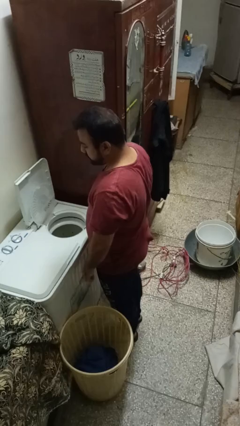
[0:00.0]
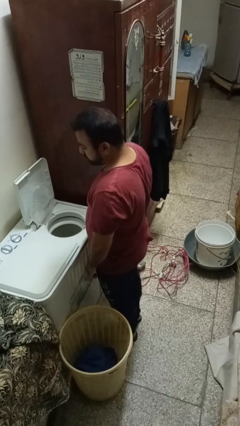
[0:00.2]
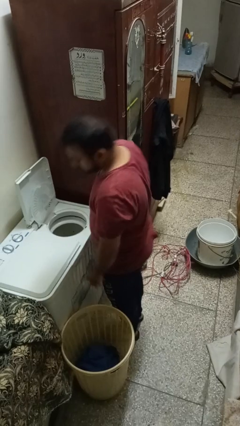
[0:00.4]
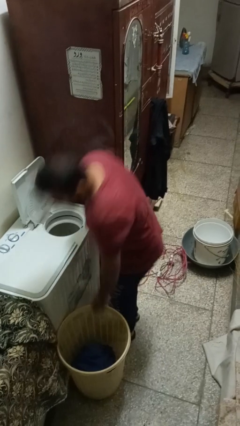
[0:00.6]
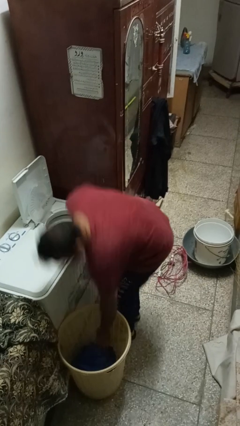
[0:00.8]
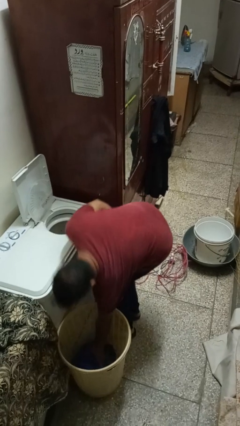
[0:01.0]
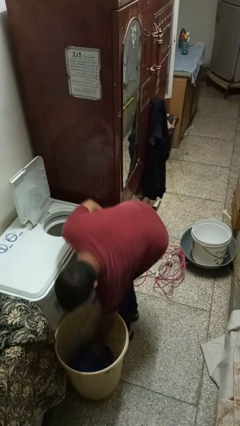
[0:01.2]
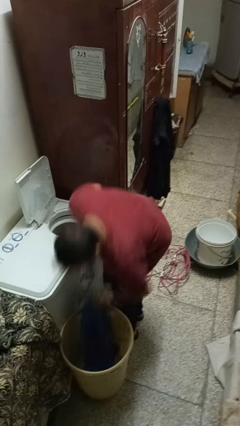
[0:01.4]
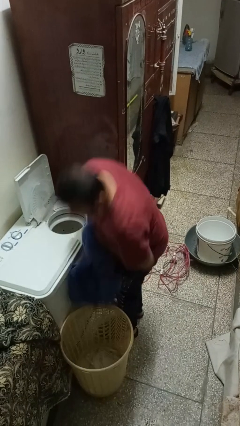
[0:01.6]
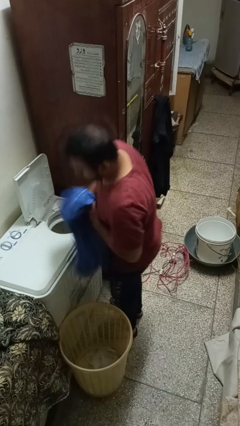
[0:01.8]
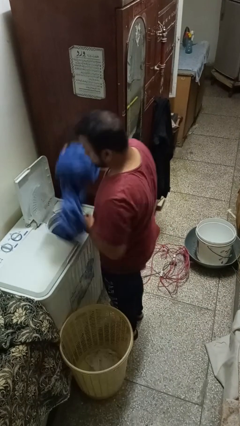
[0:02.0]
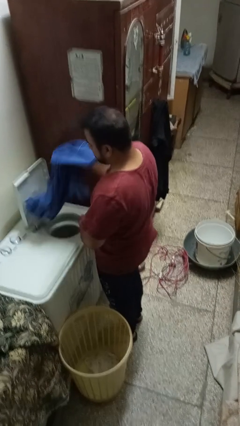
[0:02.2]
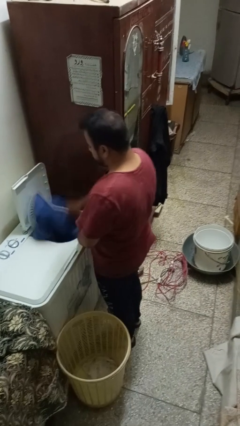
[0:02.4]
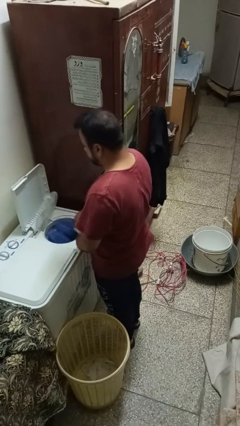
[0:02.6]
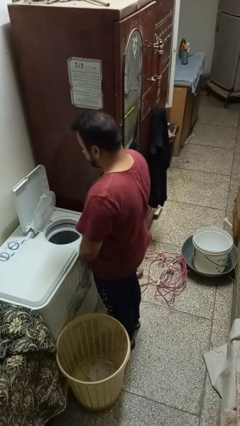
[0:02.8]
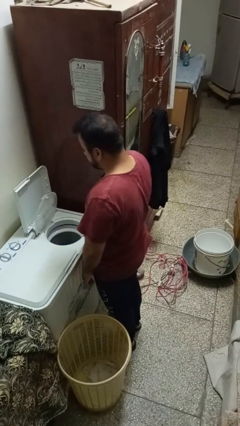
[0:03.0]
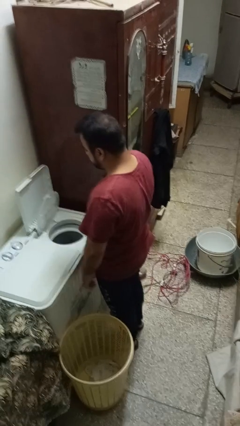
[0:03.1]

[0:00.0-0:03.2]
person loads dryer

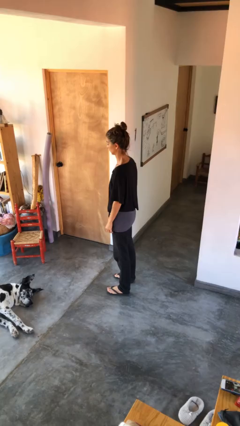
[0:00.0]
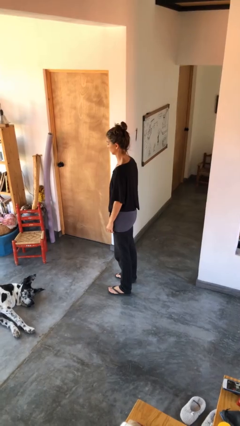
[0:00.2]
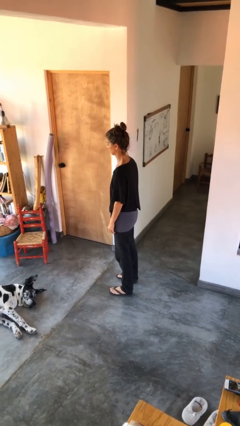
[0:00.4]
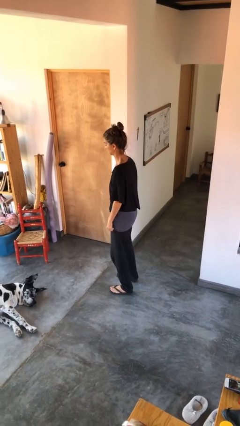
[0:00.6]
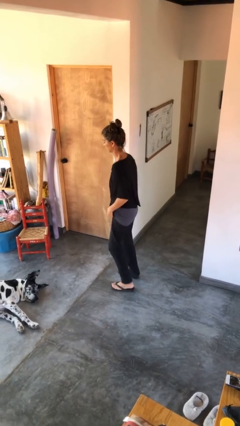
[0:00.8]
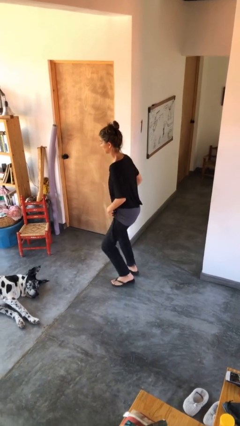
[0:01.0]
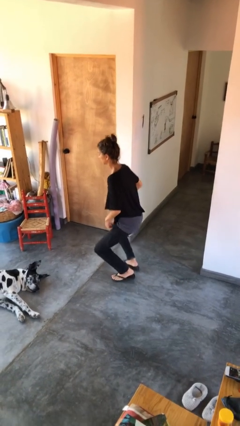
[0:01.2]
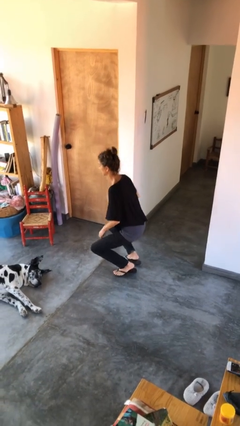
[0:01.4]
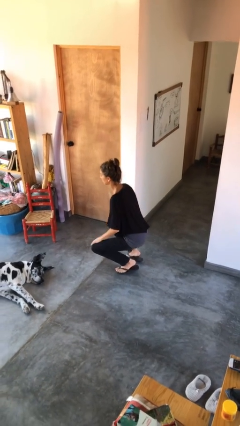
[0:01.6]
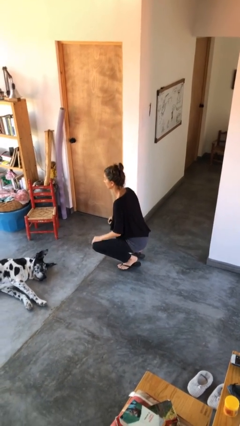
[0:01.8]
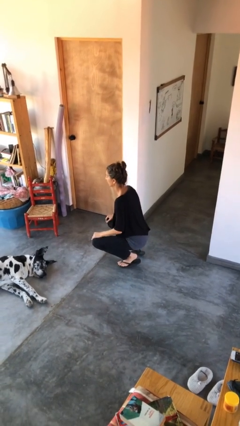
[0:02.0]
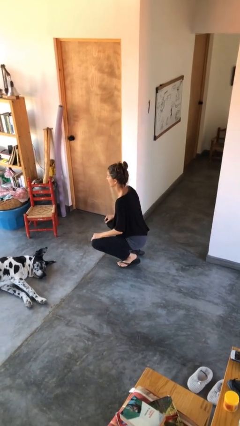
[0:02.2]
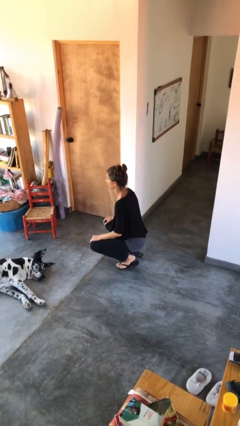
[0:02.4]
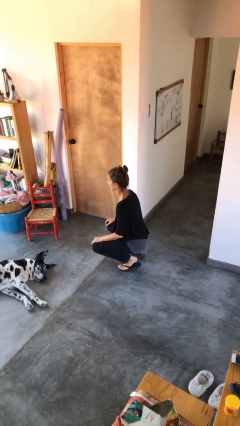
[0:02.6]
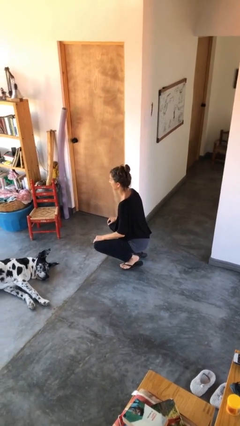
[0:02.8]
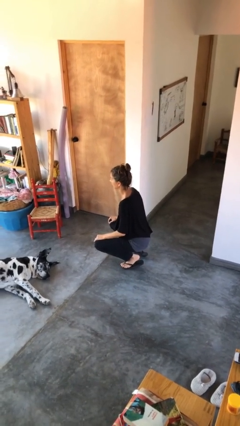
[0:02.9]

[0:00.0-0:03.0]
person squats

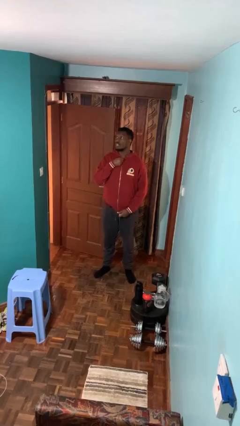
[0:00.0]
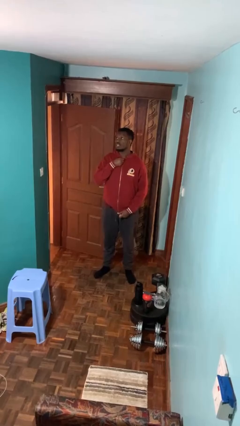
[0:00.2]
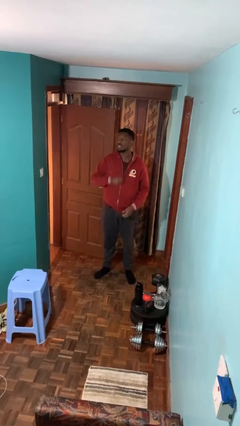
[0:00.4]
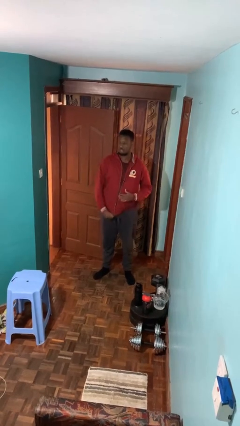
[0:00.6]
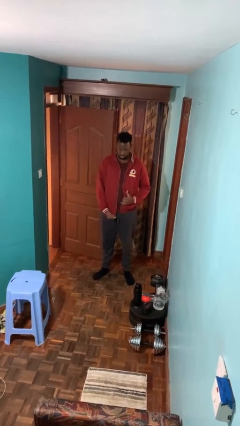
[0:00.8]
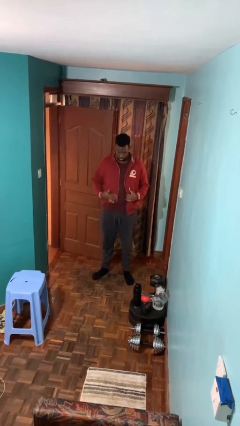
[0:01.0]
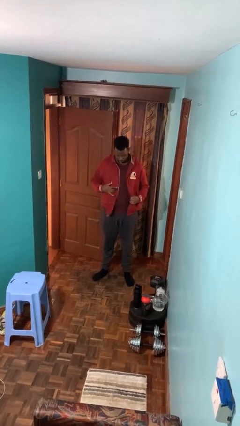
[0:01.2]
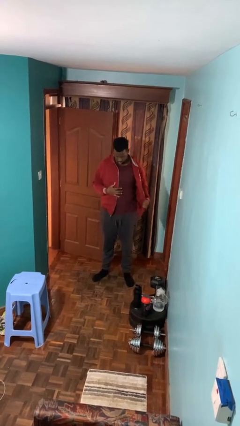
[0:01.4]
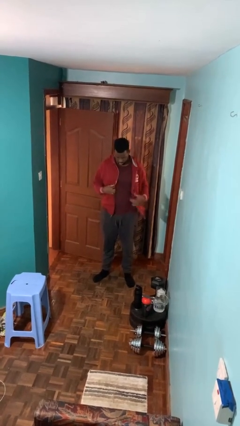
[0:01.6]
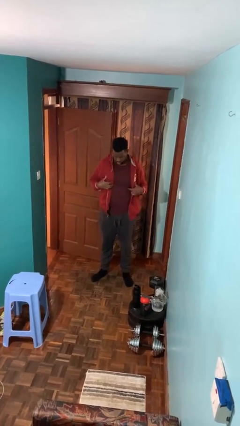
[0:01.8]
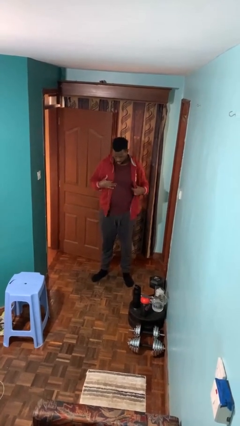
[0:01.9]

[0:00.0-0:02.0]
person unzips jacket

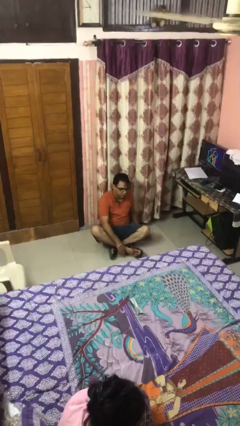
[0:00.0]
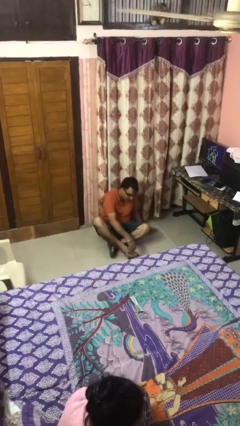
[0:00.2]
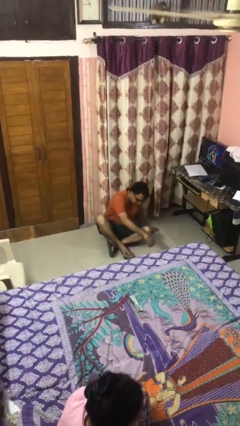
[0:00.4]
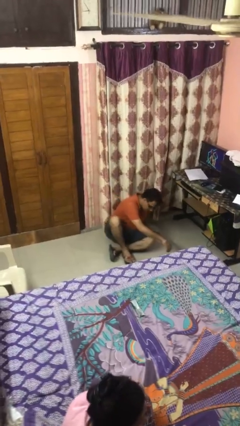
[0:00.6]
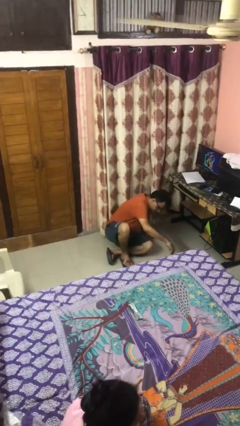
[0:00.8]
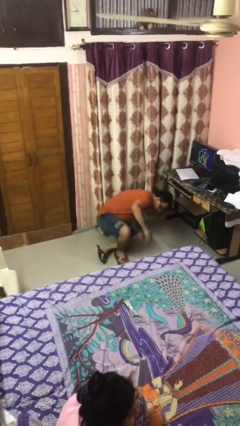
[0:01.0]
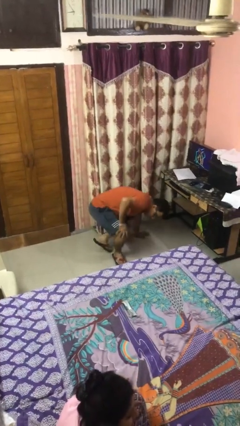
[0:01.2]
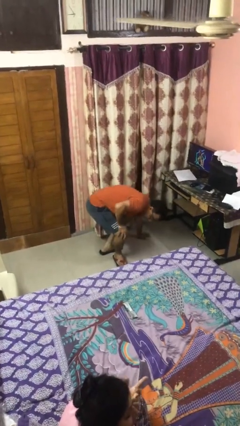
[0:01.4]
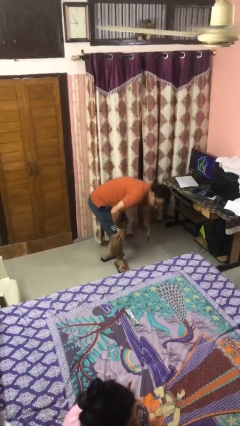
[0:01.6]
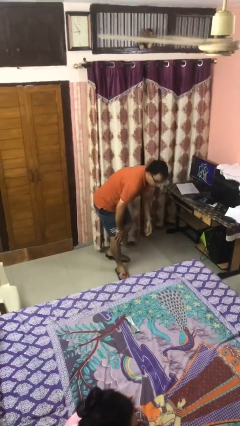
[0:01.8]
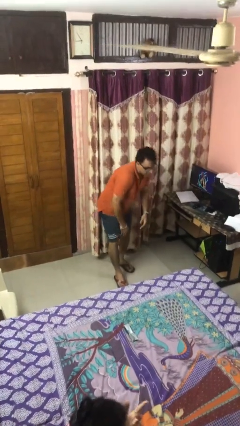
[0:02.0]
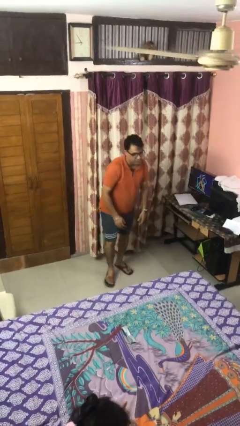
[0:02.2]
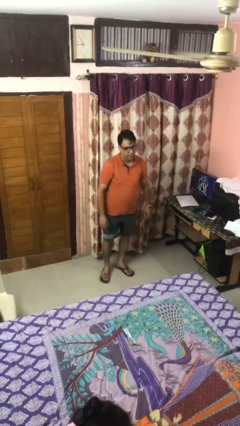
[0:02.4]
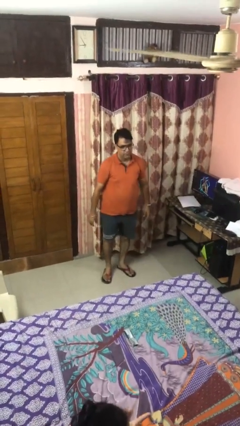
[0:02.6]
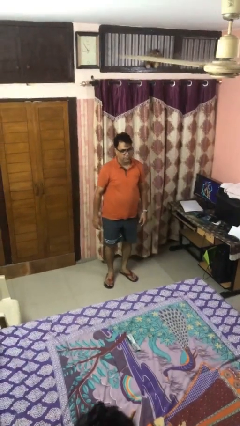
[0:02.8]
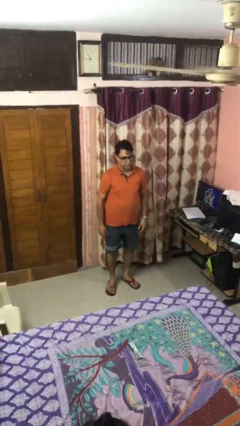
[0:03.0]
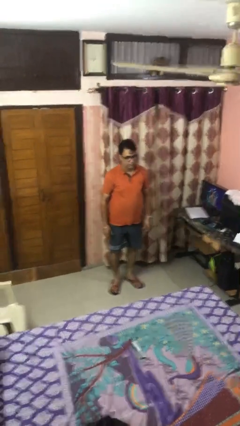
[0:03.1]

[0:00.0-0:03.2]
person stands up from floor

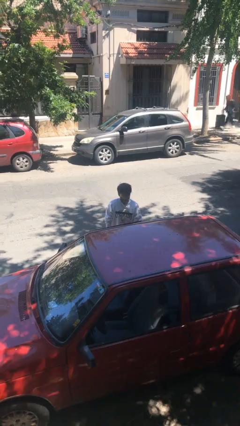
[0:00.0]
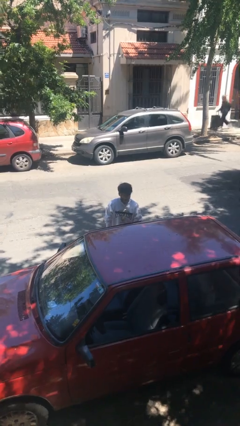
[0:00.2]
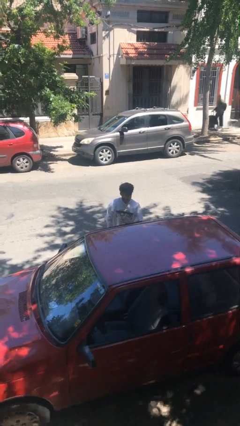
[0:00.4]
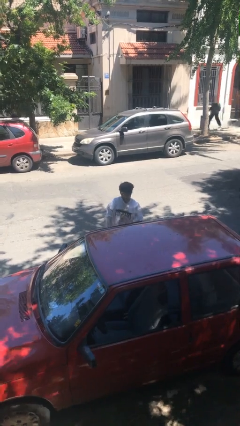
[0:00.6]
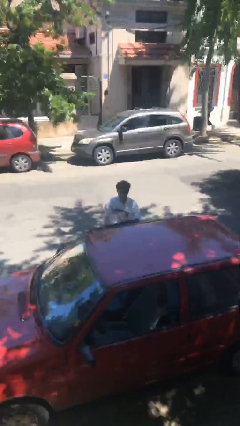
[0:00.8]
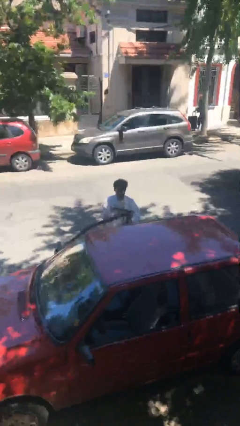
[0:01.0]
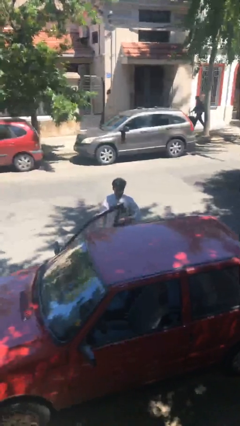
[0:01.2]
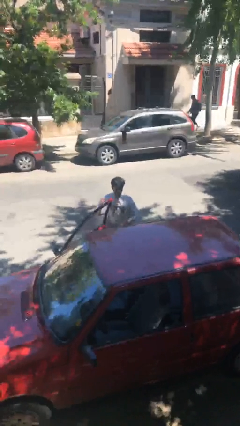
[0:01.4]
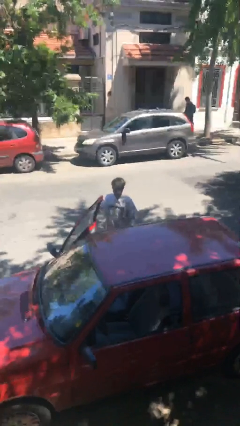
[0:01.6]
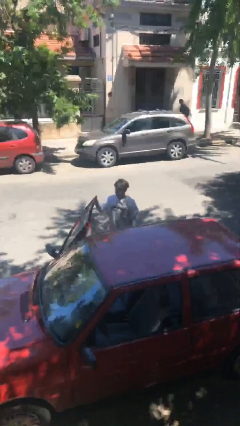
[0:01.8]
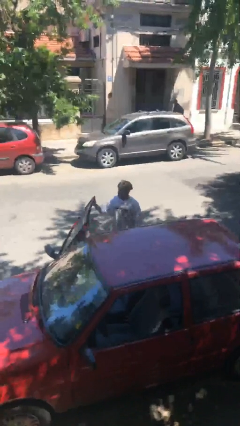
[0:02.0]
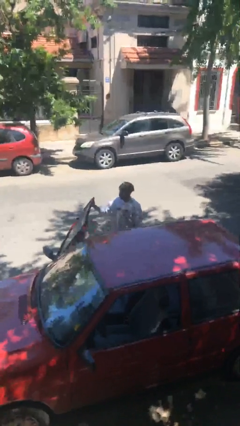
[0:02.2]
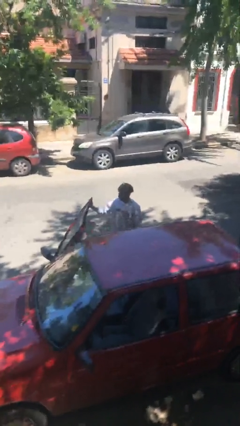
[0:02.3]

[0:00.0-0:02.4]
person opens car door

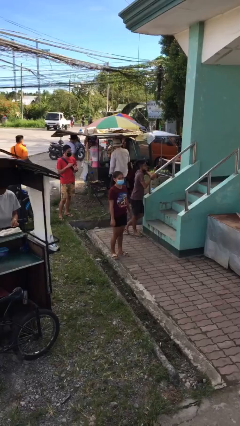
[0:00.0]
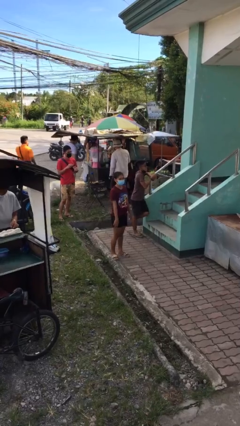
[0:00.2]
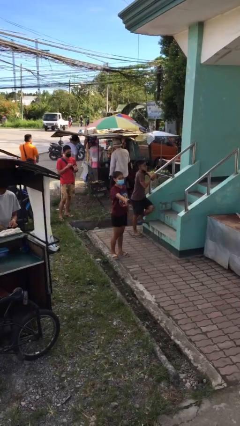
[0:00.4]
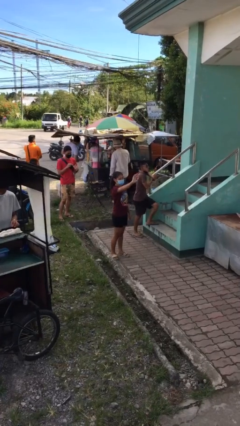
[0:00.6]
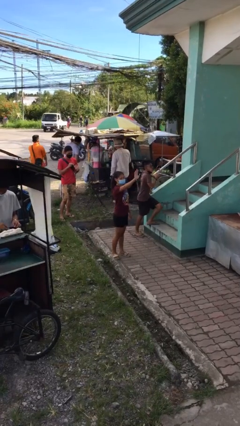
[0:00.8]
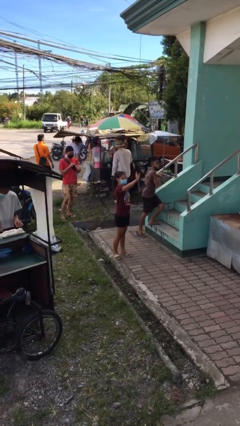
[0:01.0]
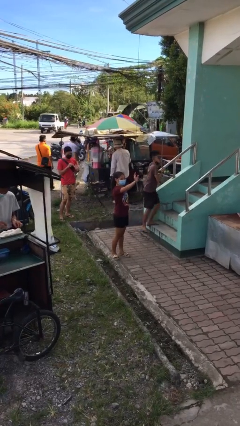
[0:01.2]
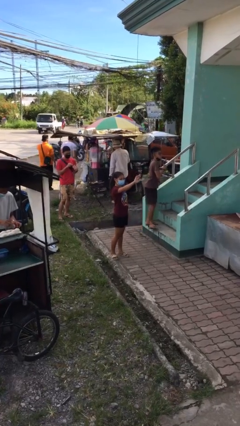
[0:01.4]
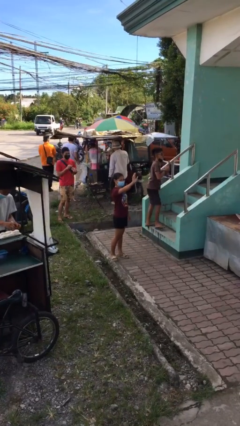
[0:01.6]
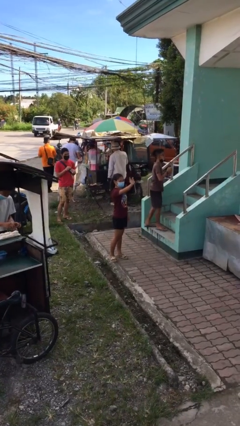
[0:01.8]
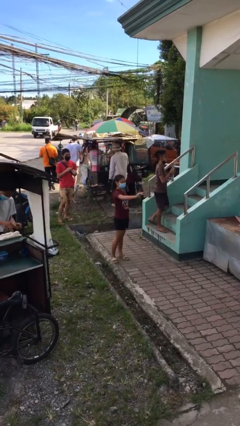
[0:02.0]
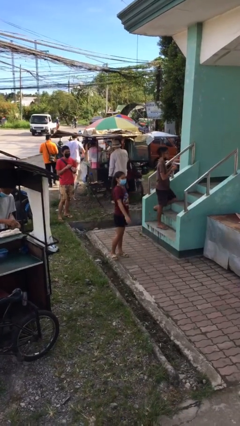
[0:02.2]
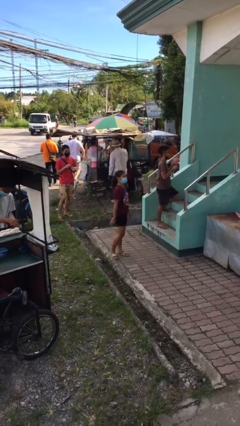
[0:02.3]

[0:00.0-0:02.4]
person waves at person

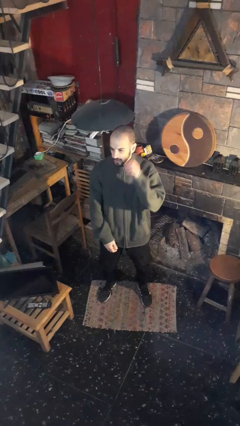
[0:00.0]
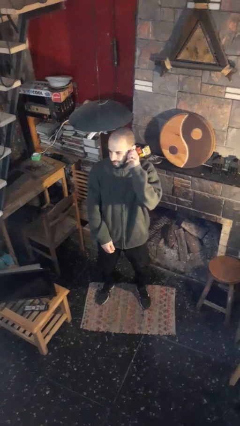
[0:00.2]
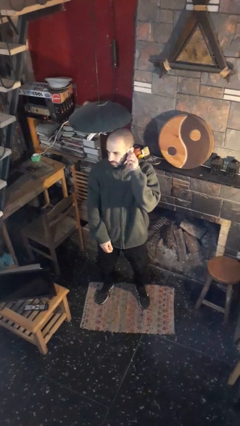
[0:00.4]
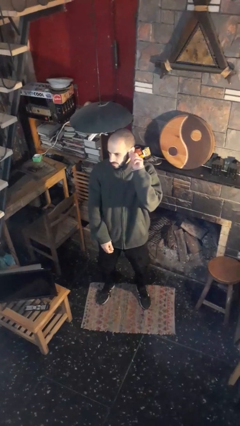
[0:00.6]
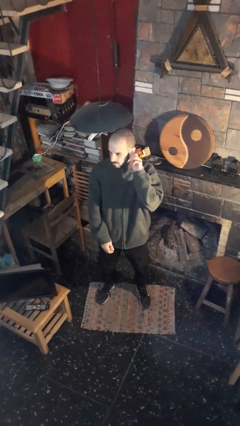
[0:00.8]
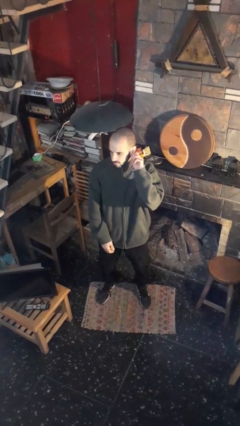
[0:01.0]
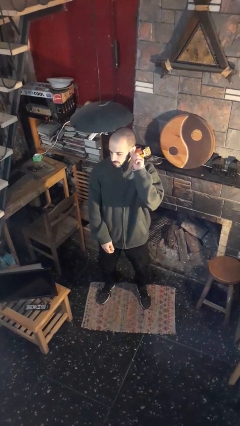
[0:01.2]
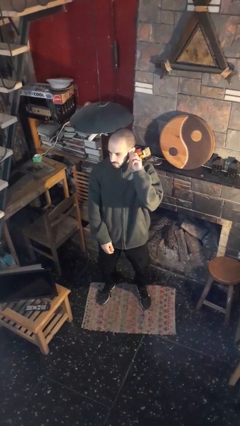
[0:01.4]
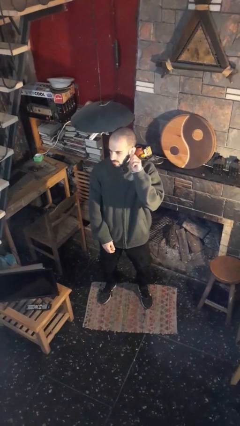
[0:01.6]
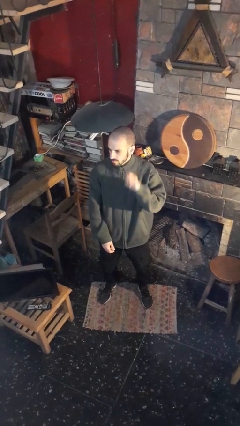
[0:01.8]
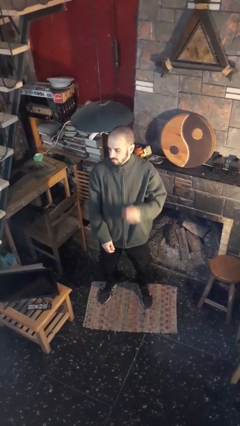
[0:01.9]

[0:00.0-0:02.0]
person touches earlobe
